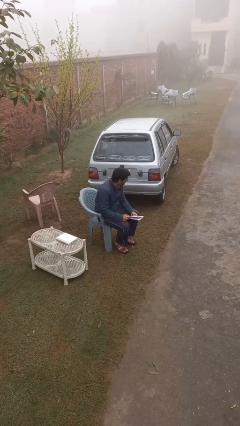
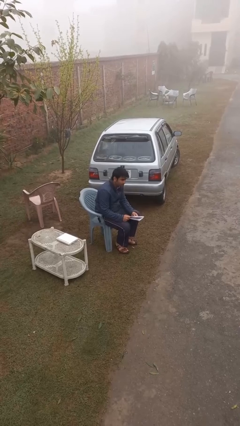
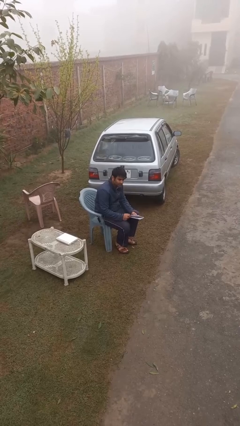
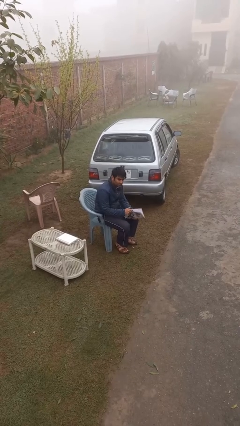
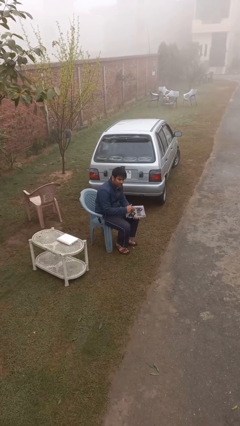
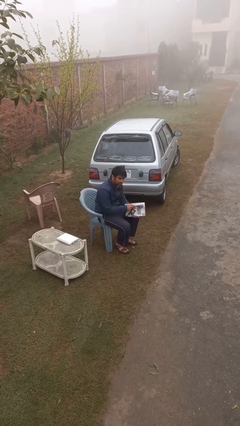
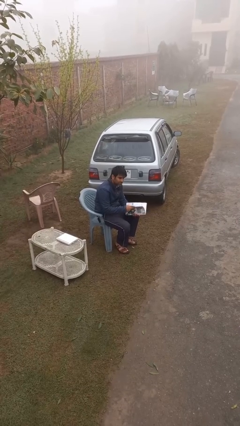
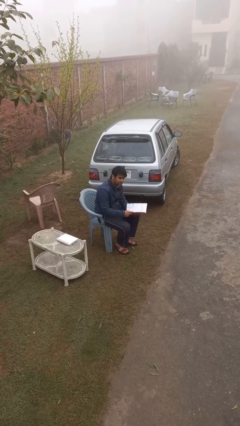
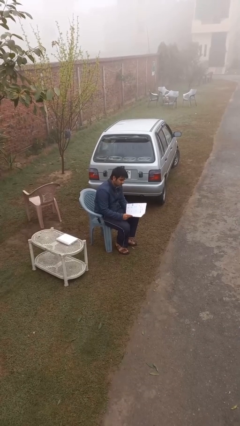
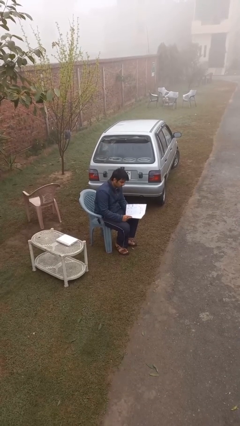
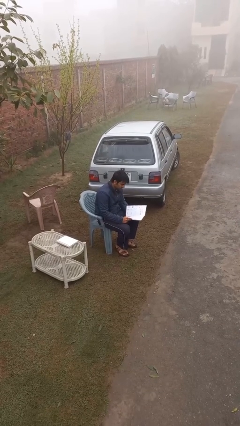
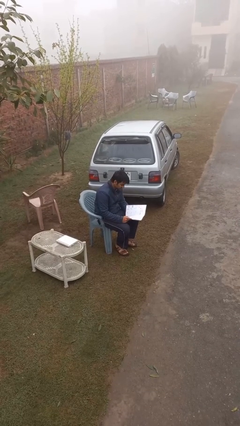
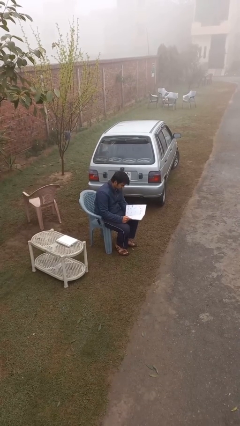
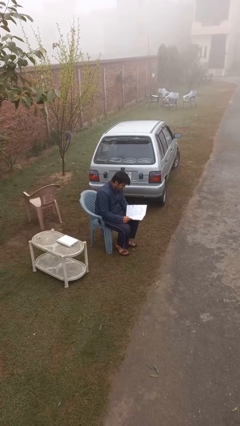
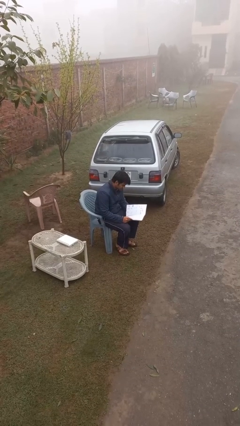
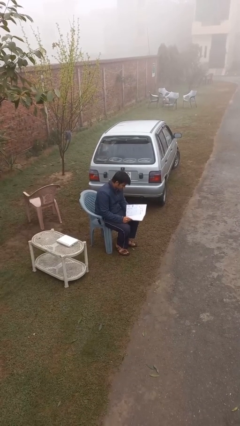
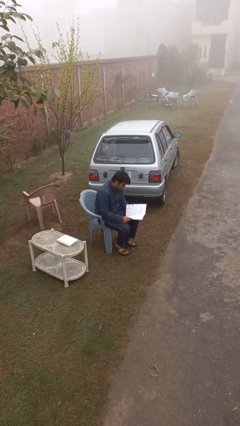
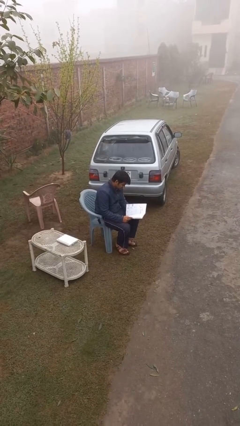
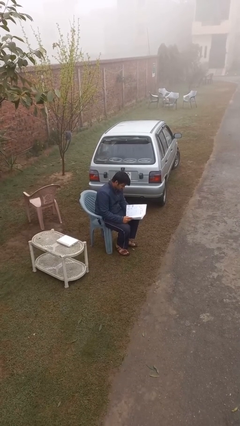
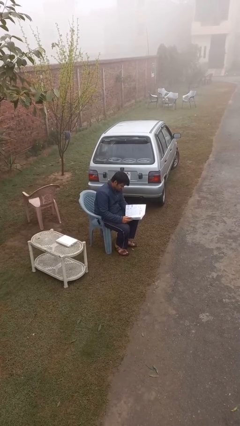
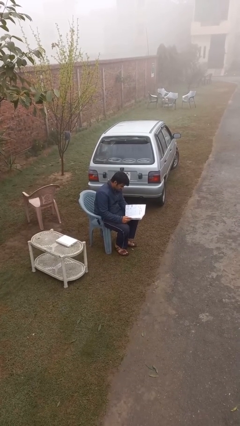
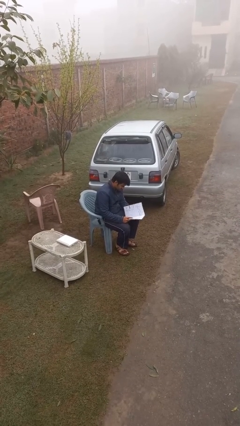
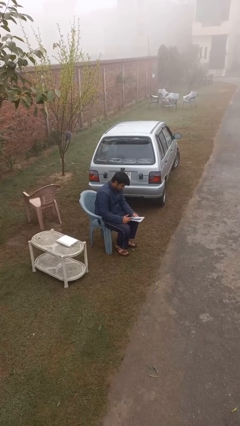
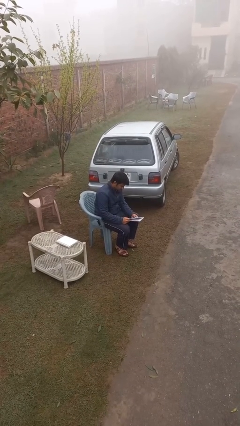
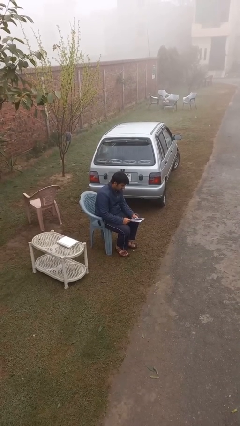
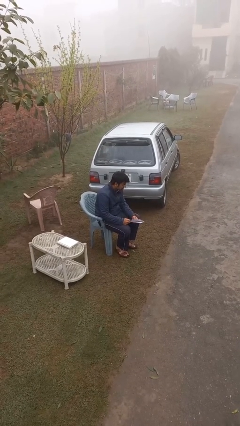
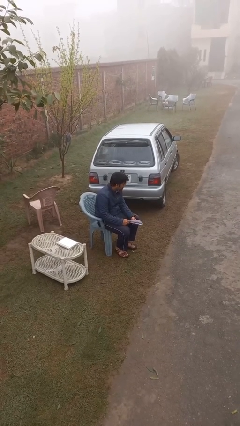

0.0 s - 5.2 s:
person reads document

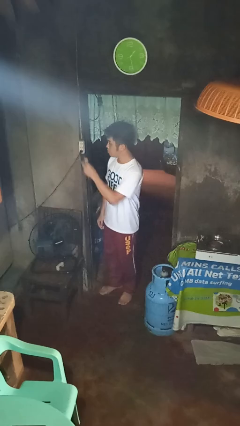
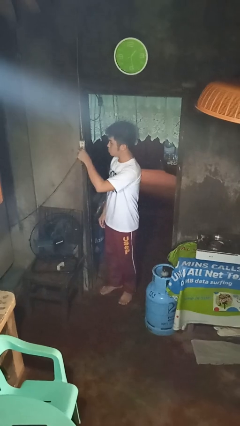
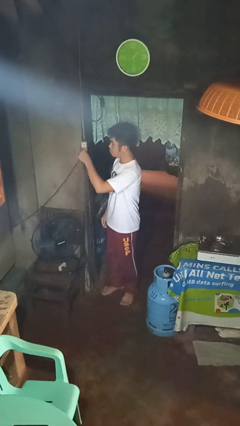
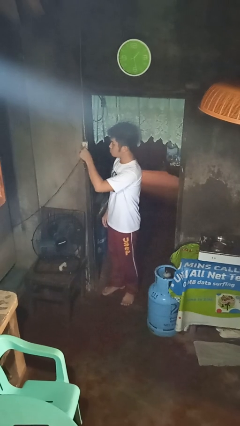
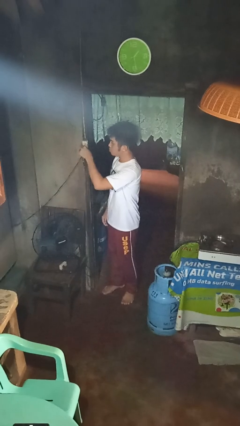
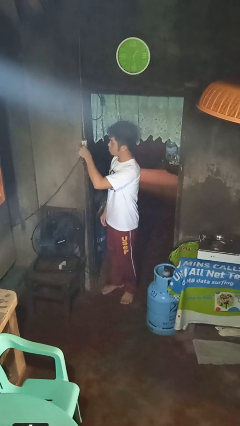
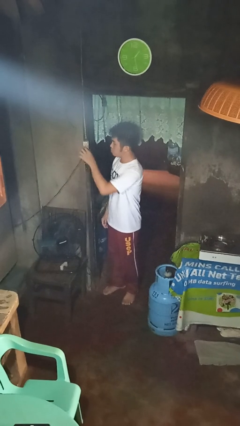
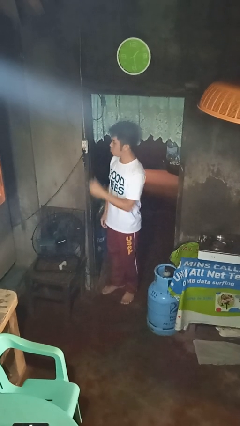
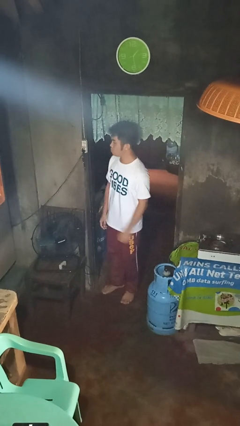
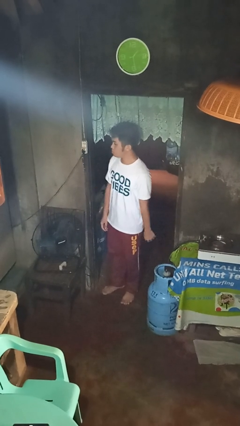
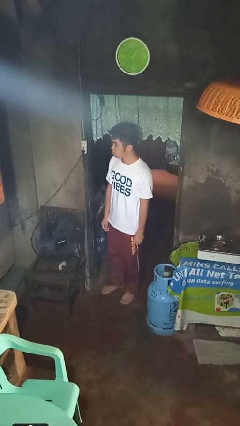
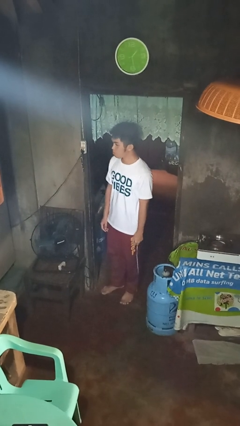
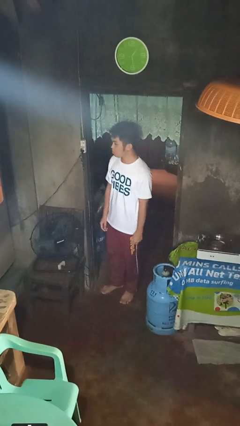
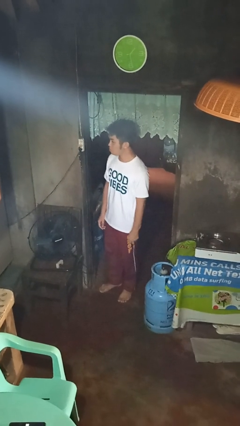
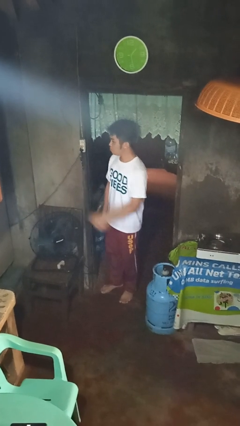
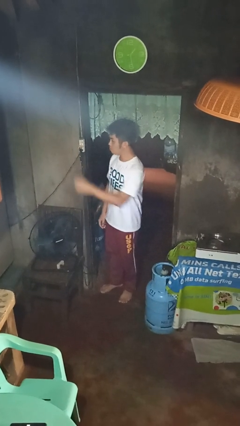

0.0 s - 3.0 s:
person plugs into electrical socket

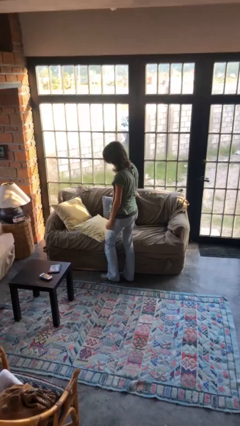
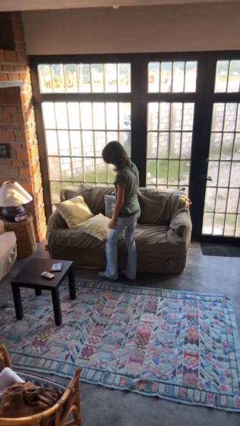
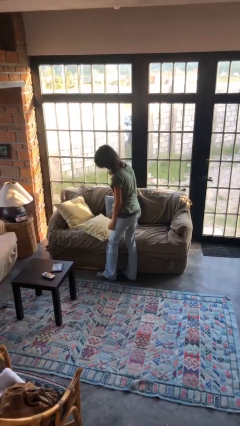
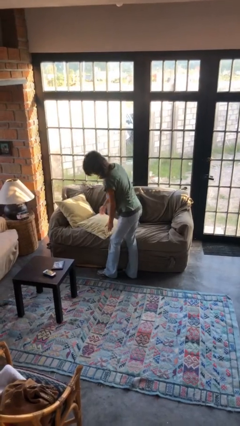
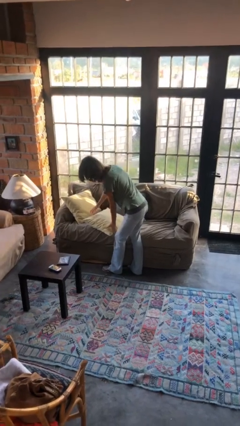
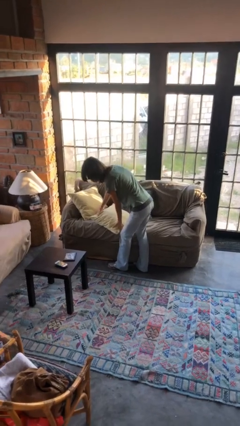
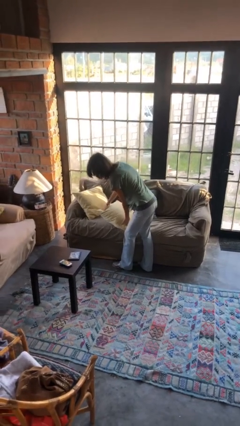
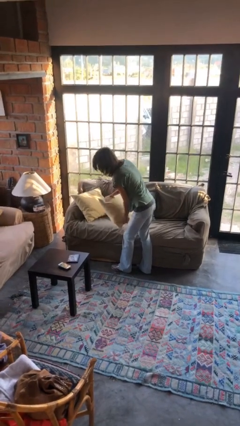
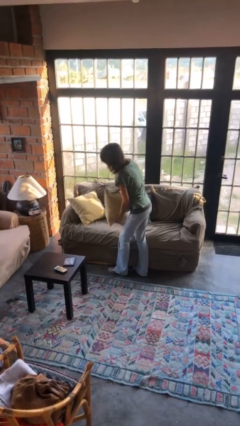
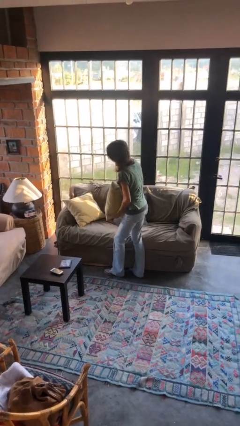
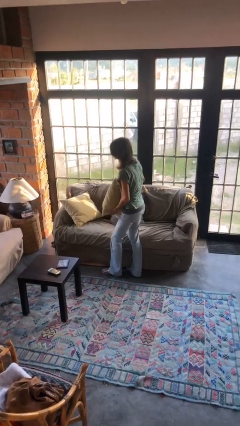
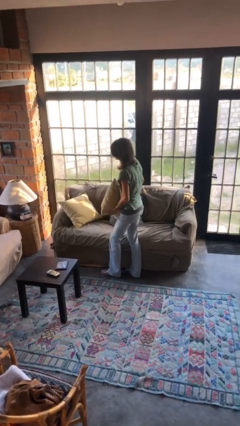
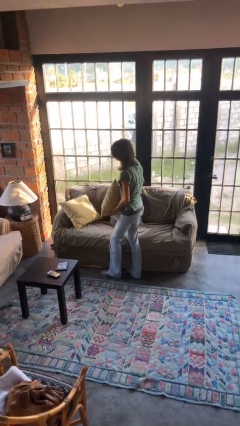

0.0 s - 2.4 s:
person picks up object from couch

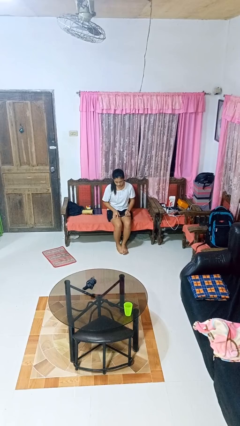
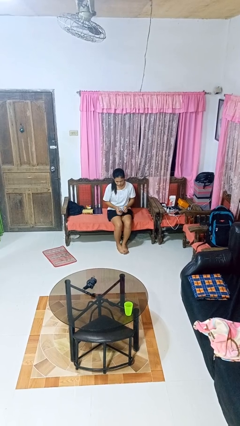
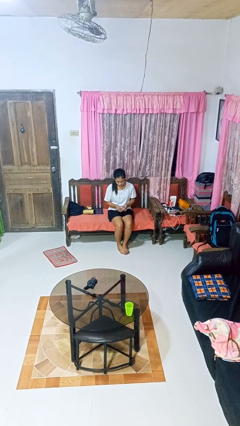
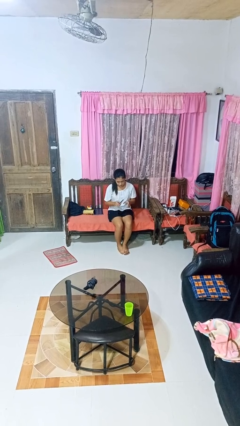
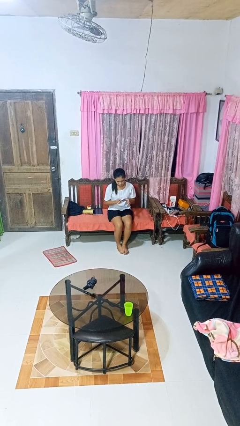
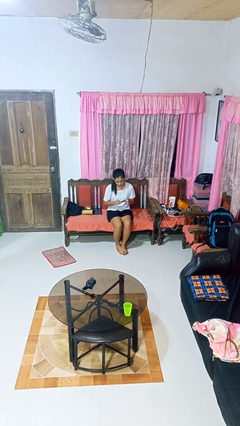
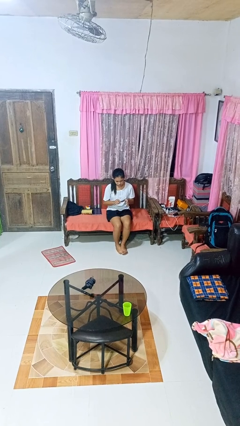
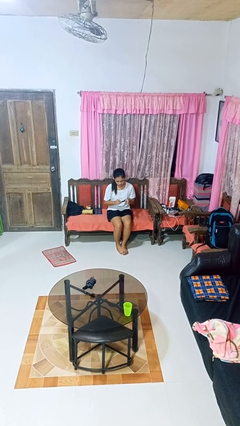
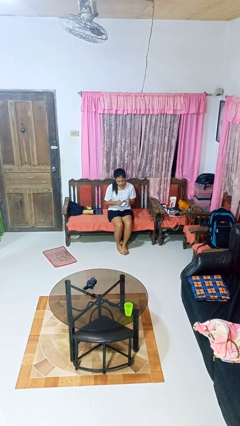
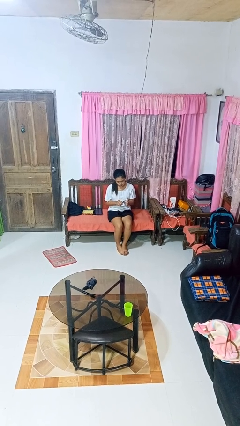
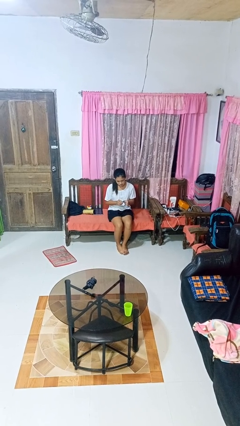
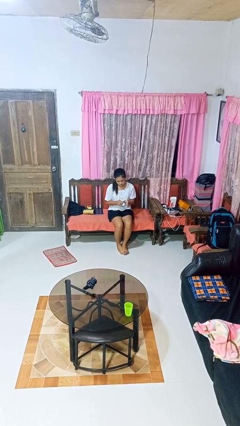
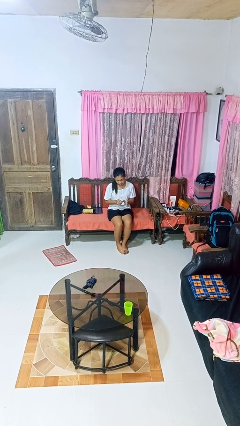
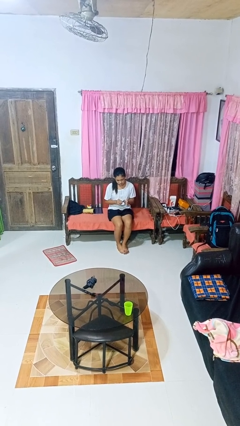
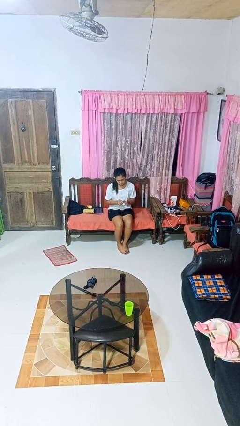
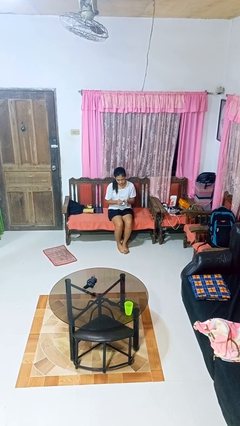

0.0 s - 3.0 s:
person files fingernails

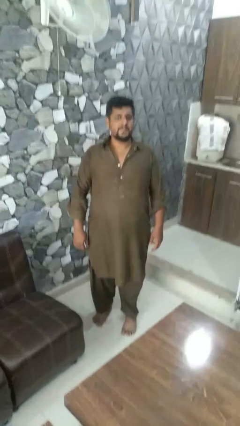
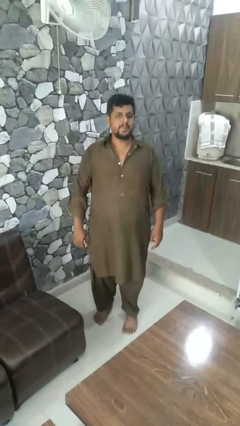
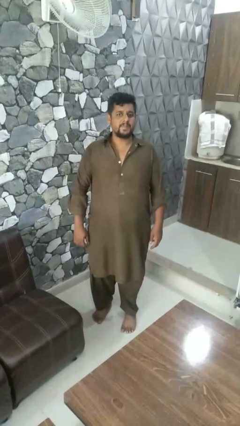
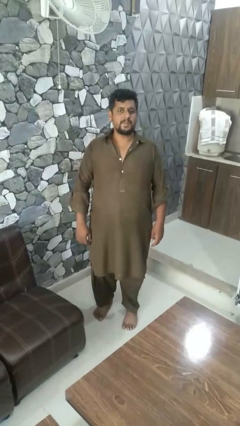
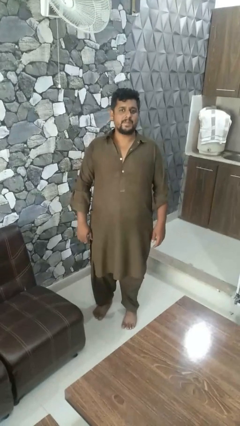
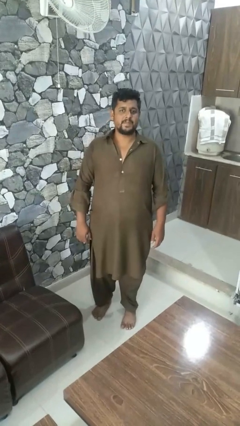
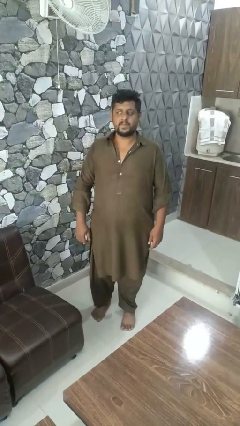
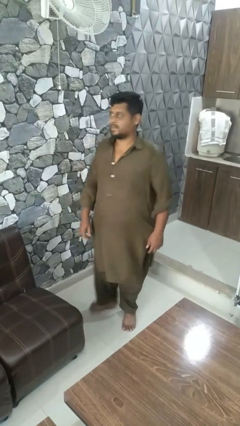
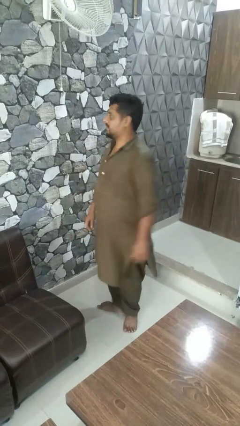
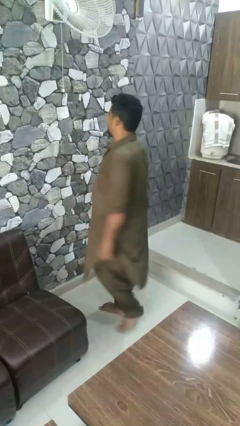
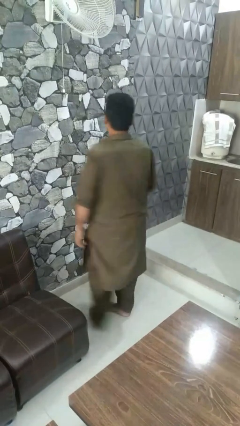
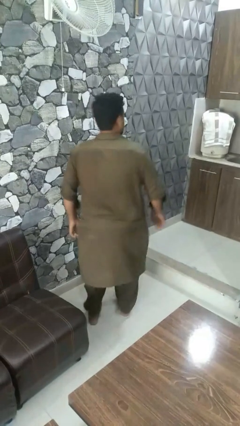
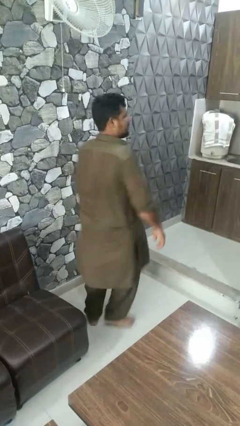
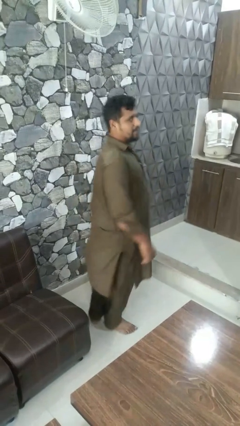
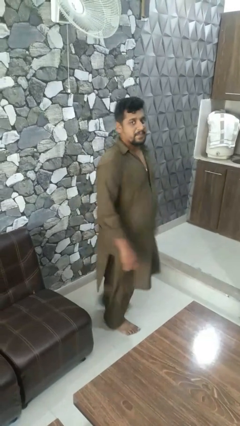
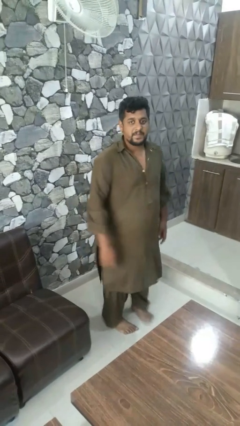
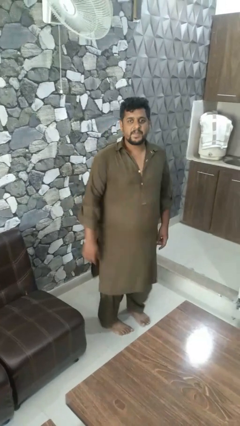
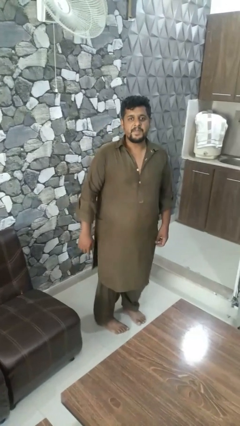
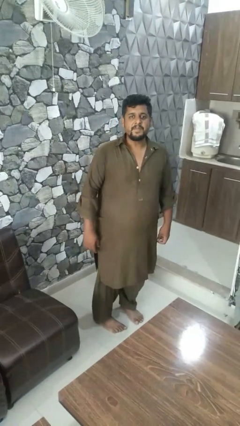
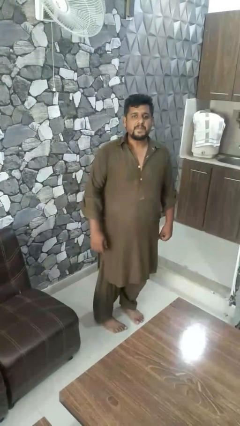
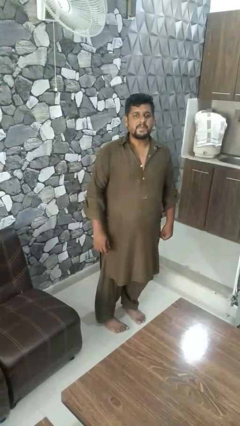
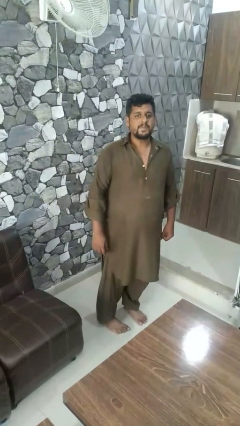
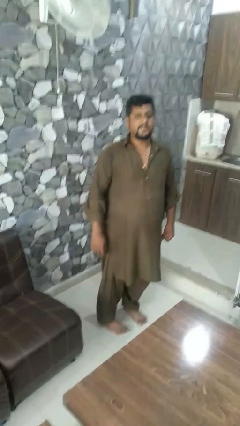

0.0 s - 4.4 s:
person twirls
